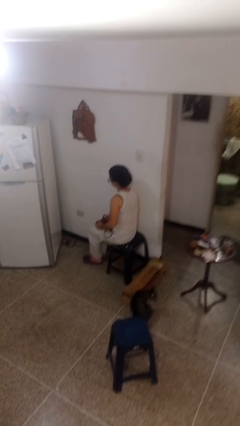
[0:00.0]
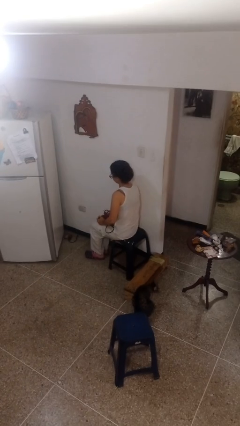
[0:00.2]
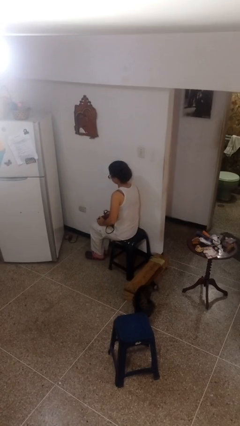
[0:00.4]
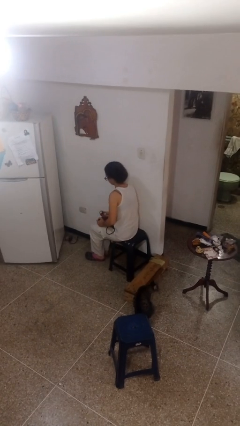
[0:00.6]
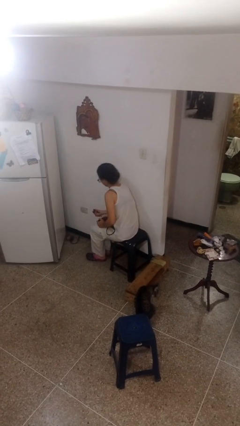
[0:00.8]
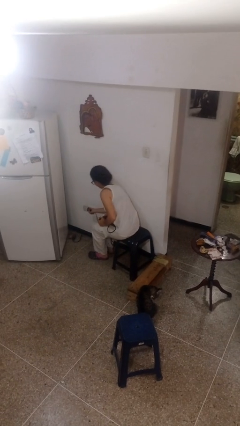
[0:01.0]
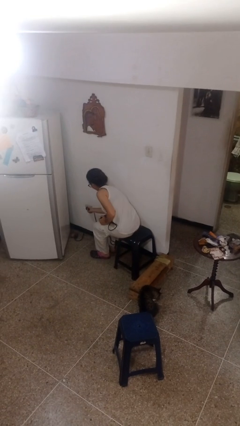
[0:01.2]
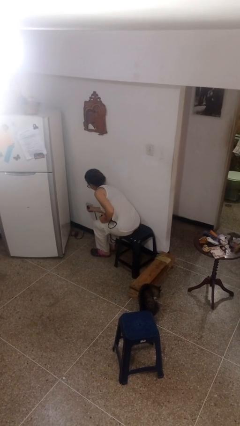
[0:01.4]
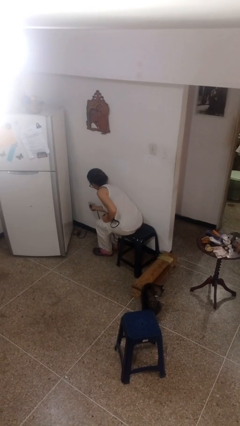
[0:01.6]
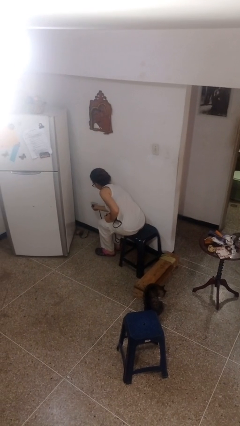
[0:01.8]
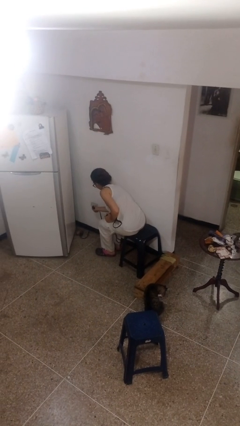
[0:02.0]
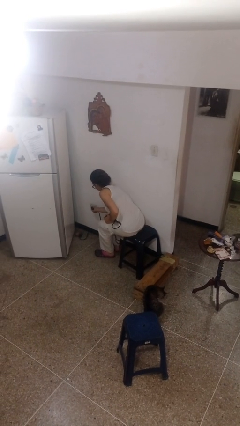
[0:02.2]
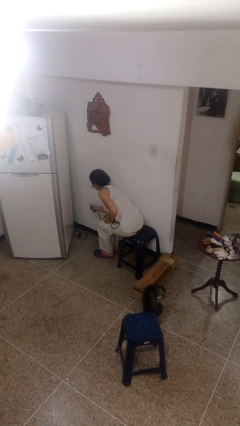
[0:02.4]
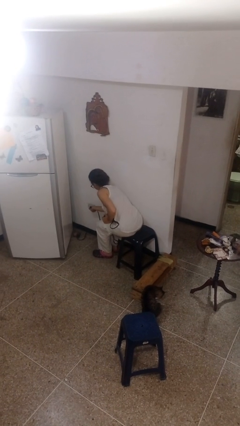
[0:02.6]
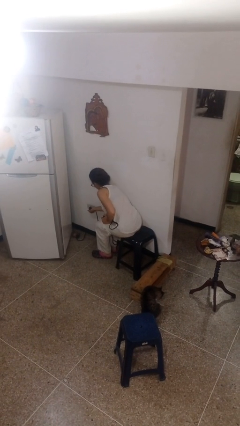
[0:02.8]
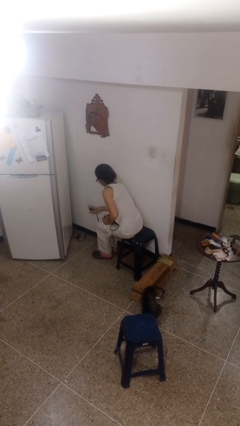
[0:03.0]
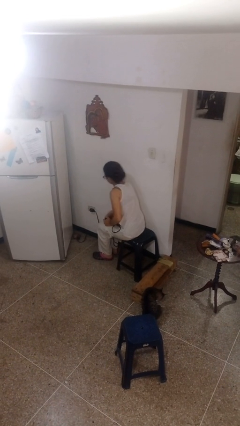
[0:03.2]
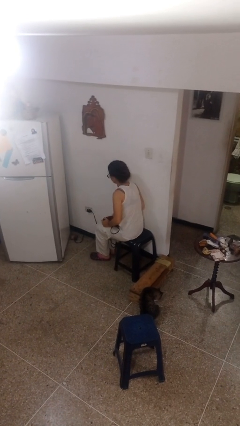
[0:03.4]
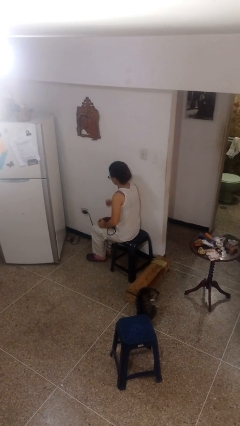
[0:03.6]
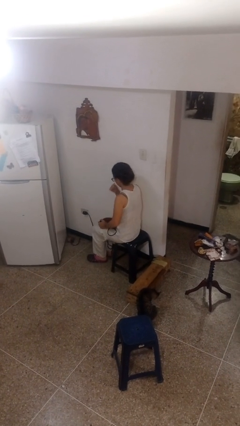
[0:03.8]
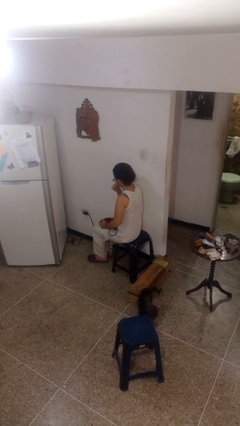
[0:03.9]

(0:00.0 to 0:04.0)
person plugs into electrical socket

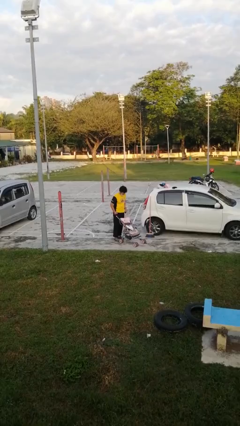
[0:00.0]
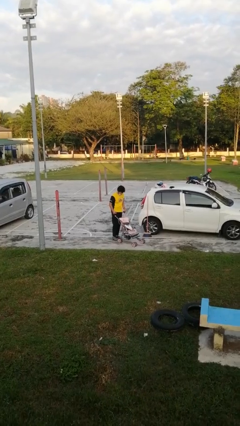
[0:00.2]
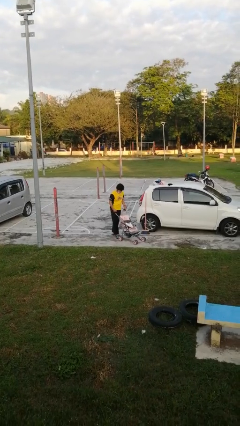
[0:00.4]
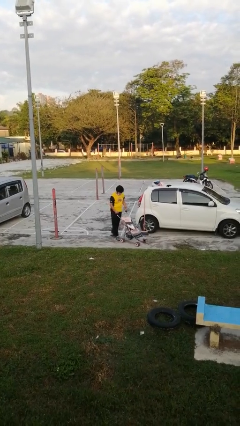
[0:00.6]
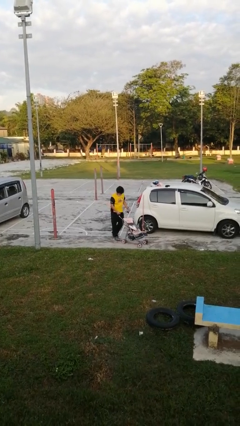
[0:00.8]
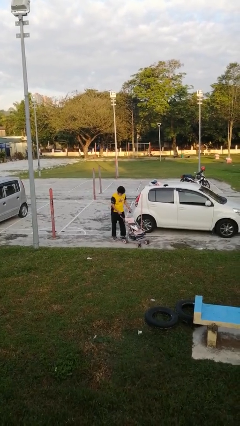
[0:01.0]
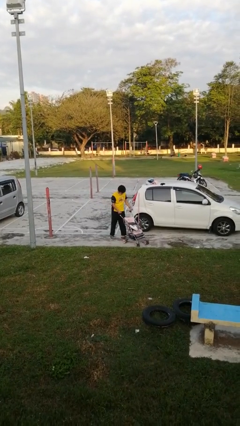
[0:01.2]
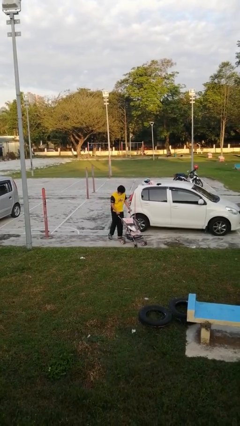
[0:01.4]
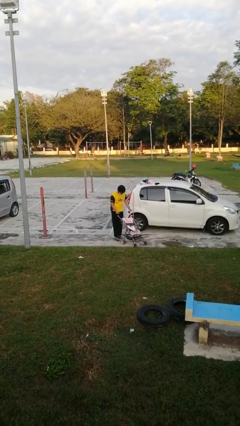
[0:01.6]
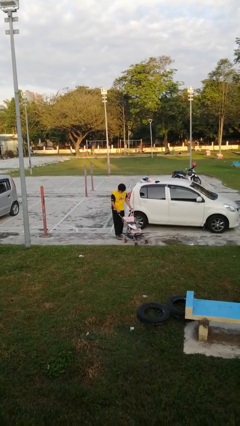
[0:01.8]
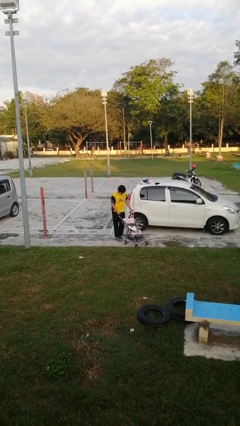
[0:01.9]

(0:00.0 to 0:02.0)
person pushes wheeled cart

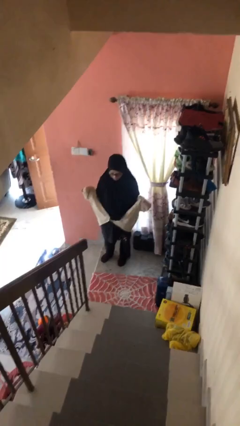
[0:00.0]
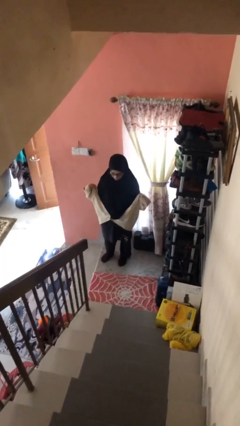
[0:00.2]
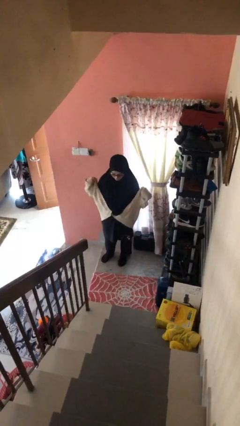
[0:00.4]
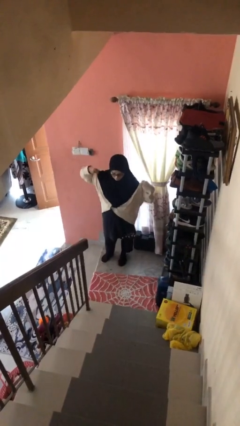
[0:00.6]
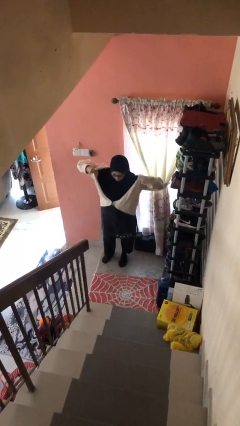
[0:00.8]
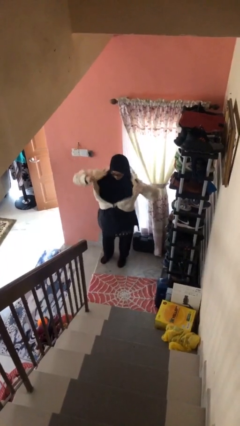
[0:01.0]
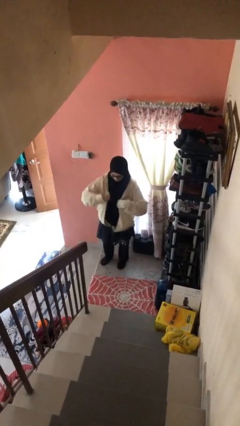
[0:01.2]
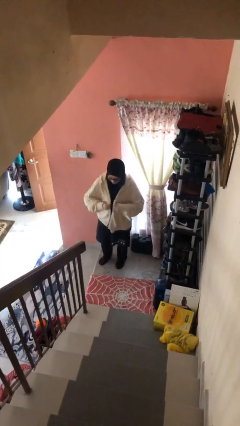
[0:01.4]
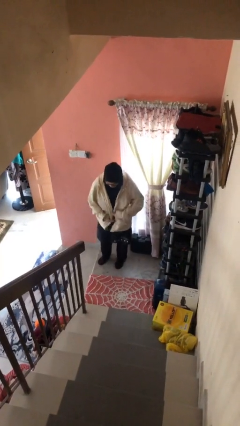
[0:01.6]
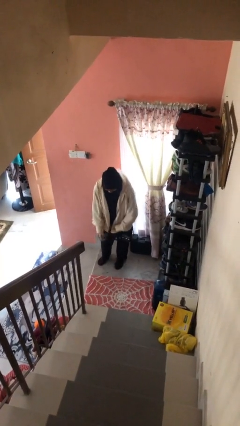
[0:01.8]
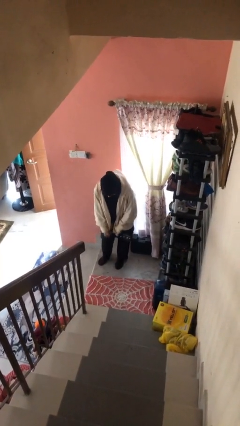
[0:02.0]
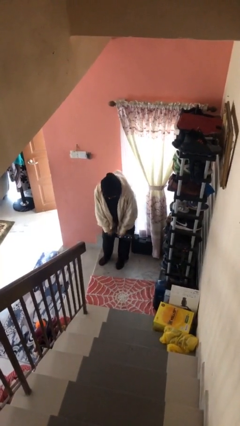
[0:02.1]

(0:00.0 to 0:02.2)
person puts on jacket

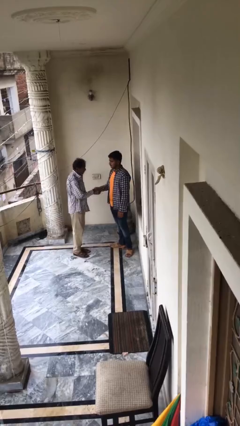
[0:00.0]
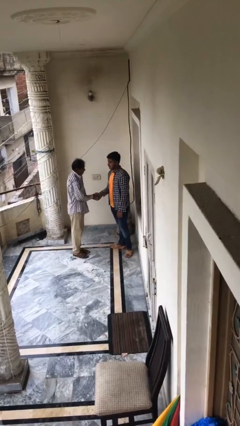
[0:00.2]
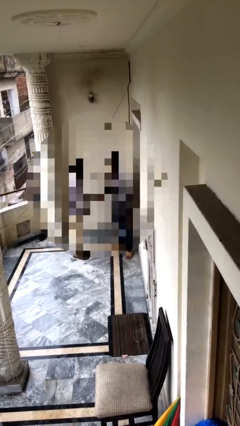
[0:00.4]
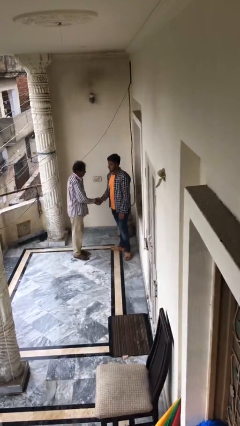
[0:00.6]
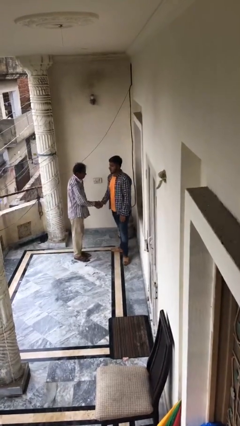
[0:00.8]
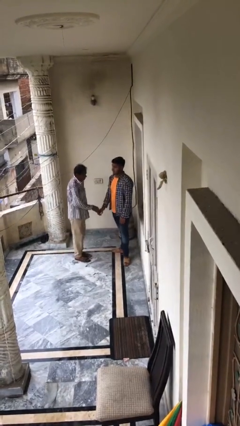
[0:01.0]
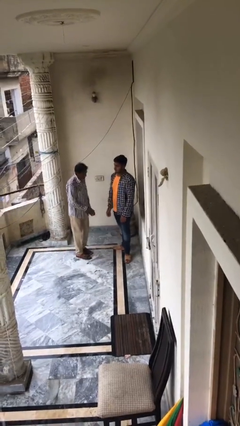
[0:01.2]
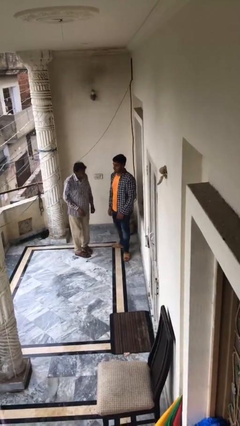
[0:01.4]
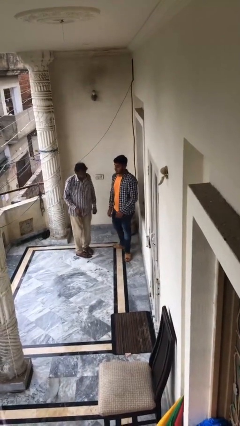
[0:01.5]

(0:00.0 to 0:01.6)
person shakes hand

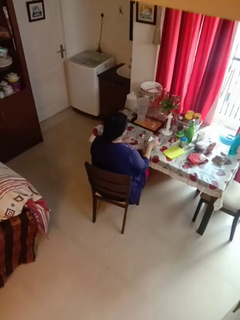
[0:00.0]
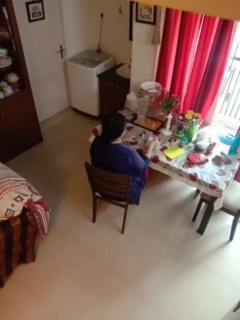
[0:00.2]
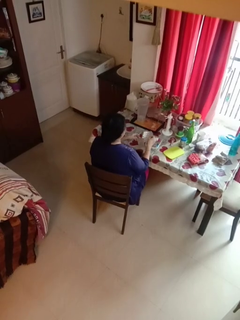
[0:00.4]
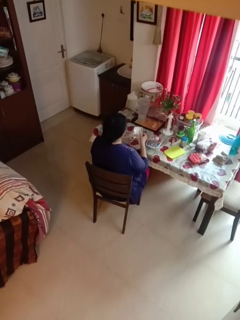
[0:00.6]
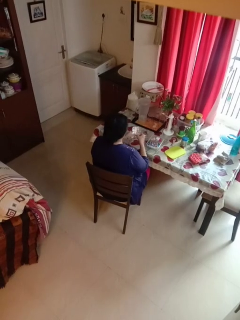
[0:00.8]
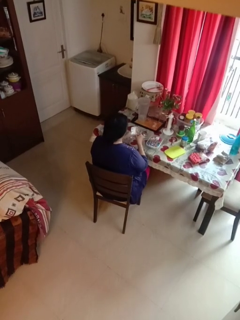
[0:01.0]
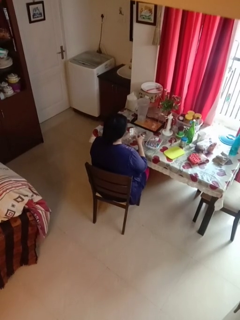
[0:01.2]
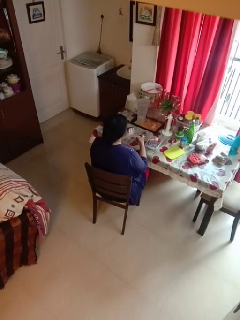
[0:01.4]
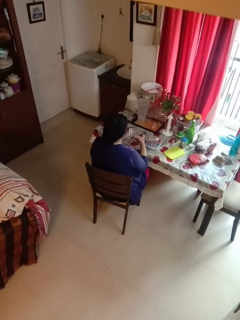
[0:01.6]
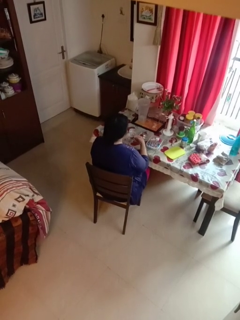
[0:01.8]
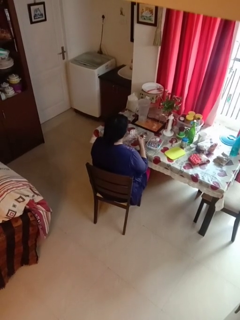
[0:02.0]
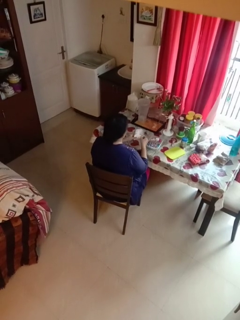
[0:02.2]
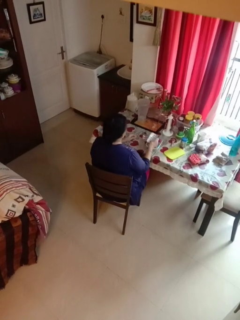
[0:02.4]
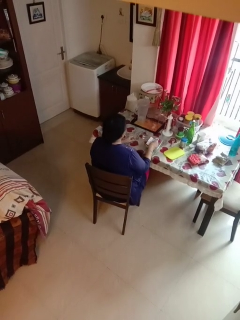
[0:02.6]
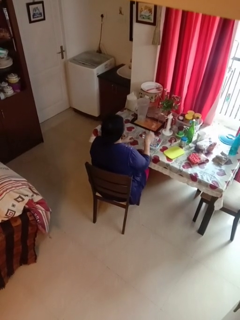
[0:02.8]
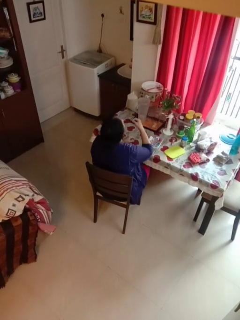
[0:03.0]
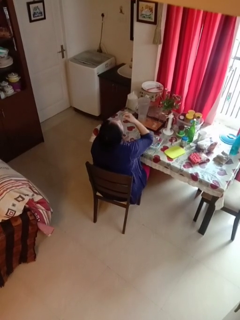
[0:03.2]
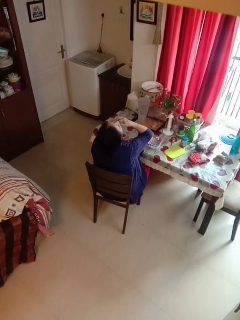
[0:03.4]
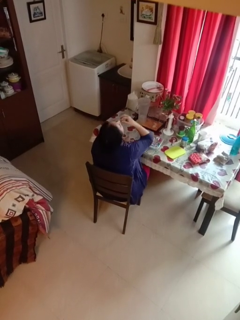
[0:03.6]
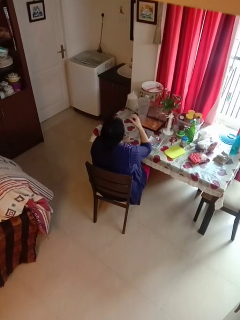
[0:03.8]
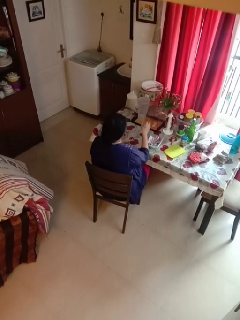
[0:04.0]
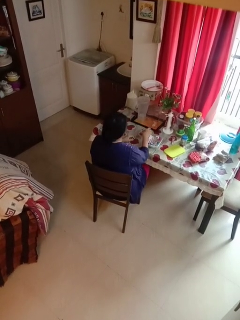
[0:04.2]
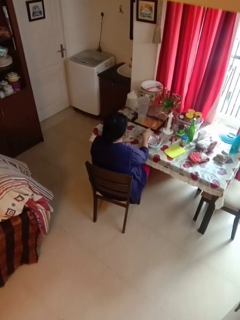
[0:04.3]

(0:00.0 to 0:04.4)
person takes medicine pills

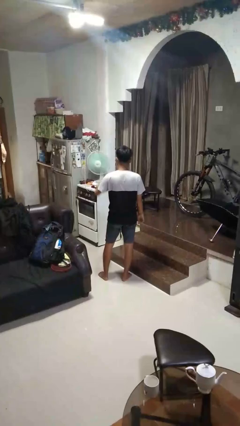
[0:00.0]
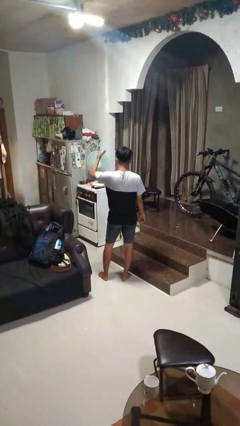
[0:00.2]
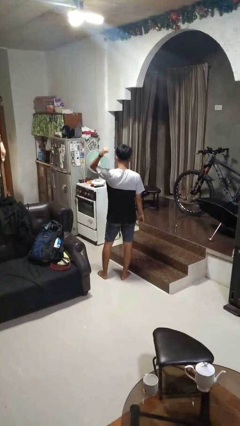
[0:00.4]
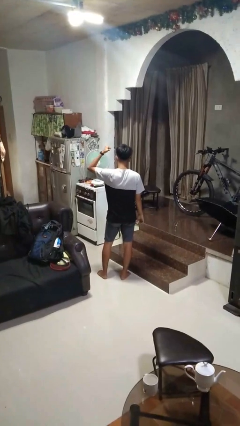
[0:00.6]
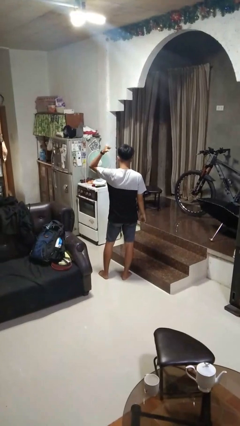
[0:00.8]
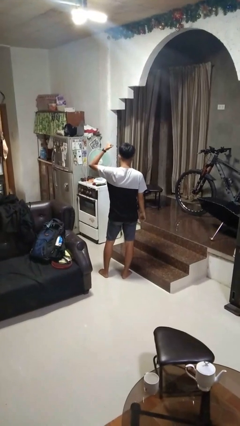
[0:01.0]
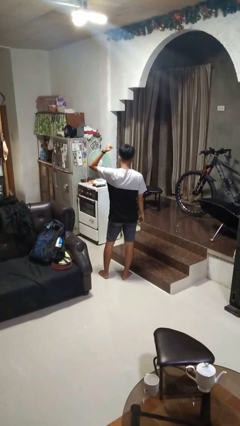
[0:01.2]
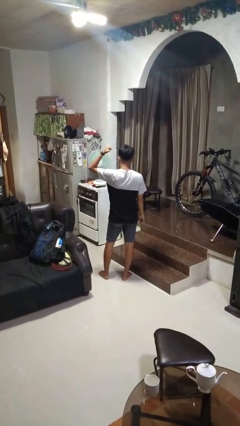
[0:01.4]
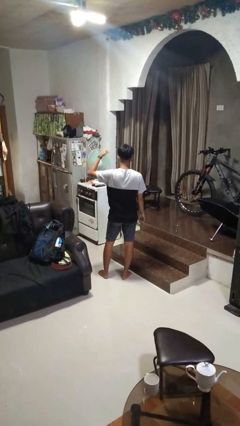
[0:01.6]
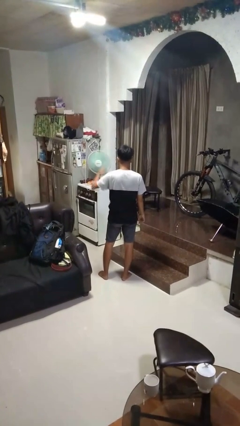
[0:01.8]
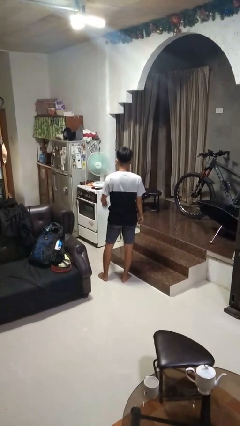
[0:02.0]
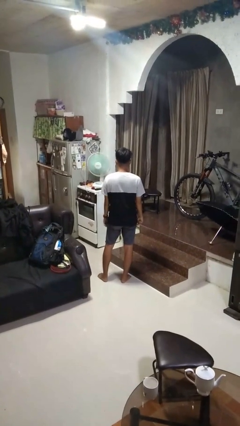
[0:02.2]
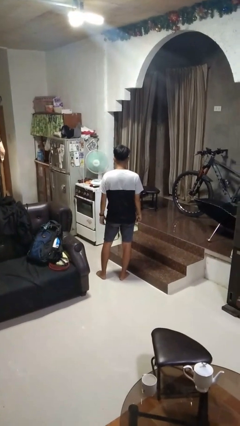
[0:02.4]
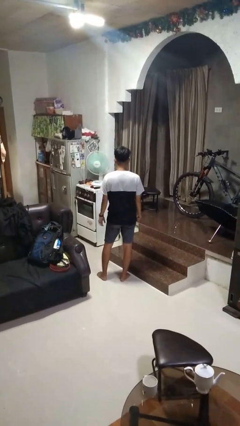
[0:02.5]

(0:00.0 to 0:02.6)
person gestures behind me

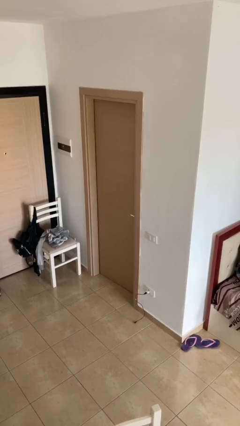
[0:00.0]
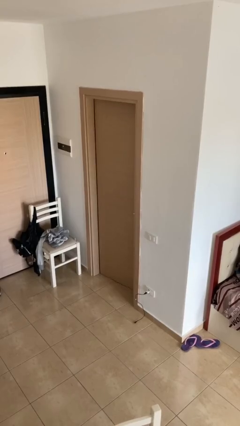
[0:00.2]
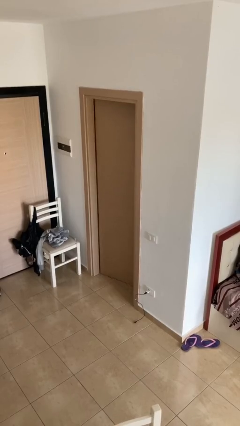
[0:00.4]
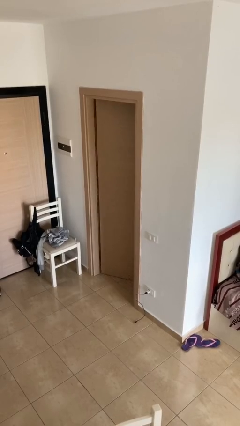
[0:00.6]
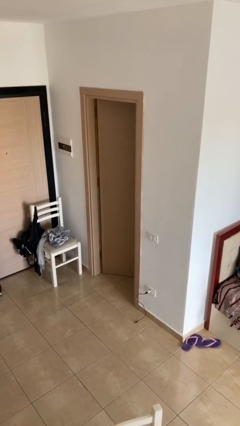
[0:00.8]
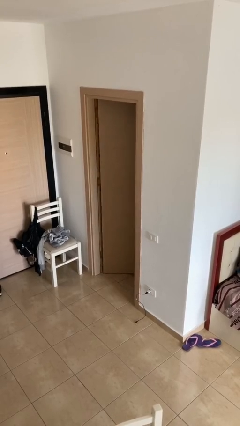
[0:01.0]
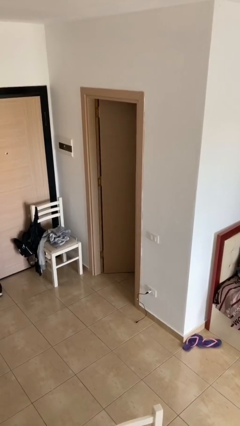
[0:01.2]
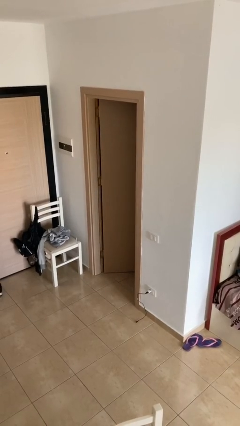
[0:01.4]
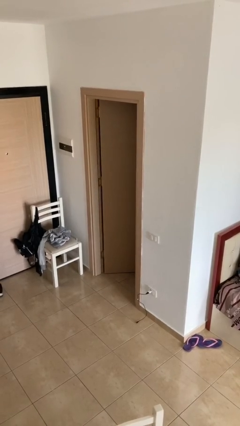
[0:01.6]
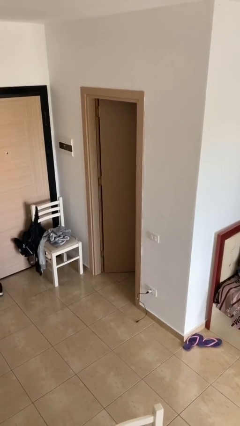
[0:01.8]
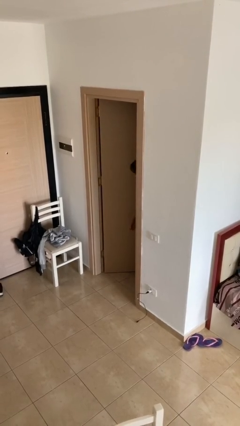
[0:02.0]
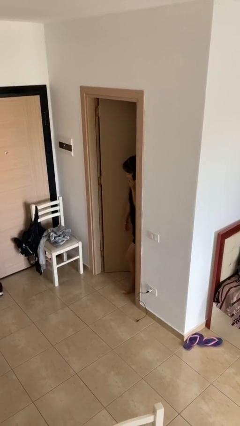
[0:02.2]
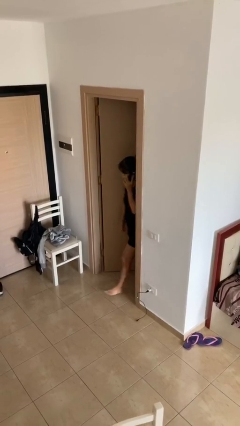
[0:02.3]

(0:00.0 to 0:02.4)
person opens facility door
